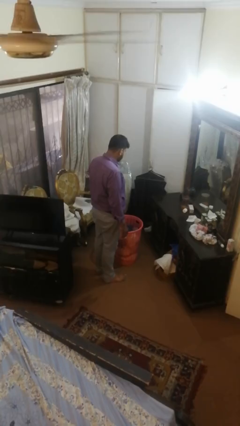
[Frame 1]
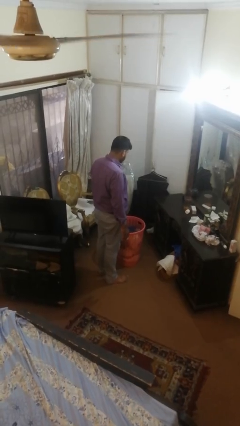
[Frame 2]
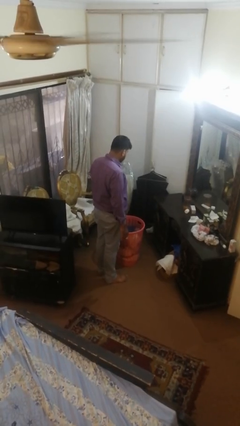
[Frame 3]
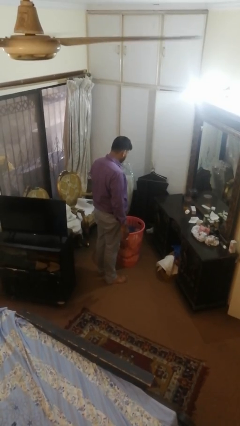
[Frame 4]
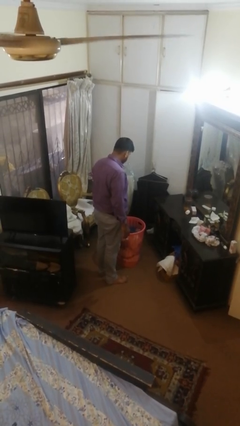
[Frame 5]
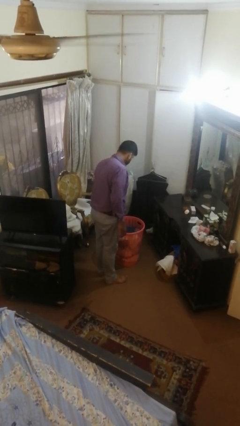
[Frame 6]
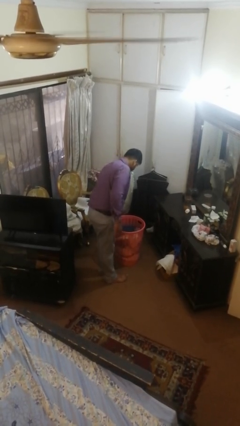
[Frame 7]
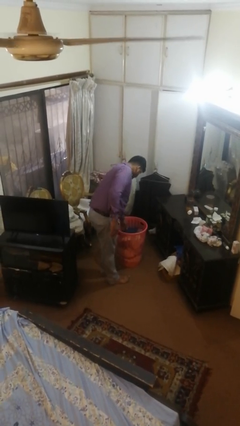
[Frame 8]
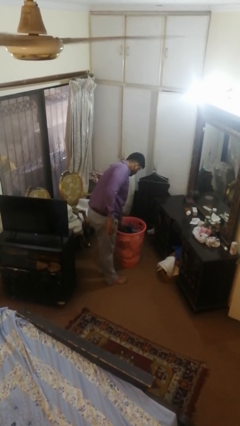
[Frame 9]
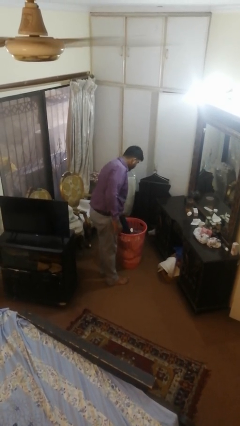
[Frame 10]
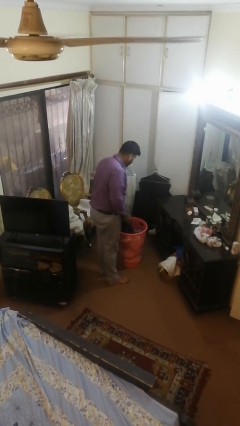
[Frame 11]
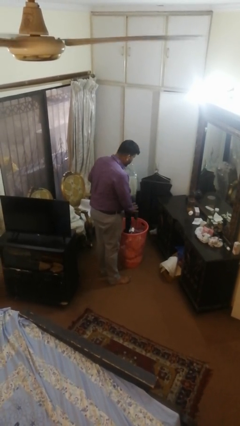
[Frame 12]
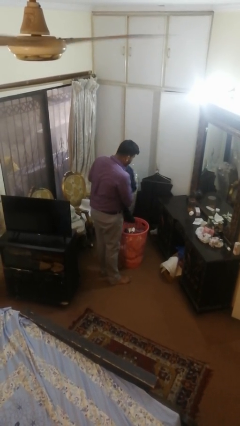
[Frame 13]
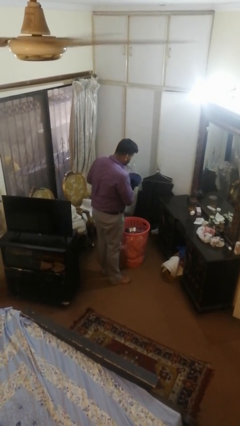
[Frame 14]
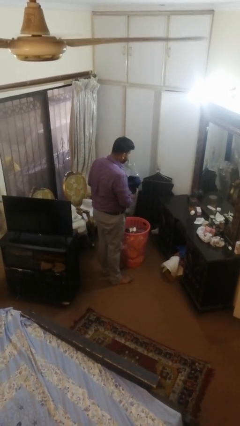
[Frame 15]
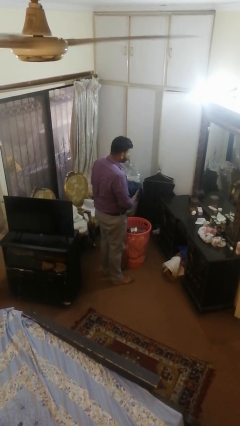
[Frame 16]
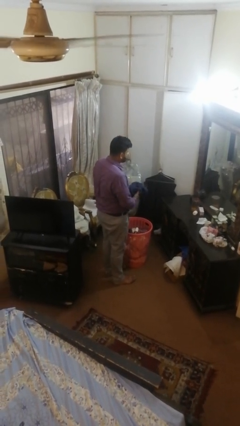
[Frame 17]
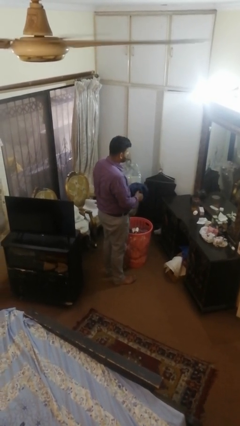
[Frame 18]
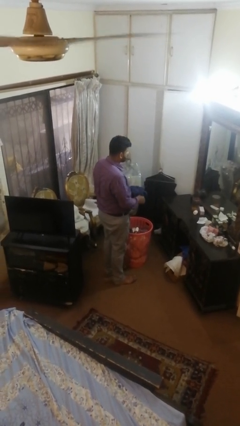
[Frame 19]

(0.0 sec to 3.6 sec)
person takes object from basket

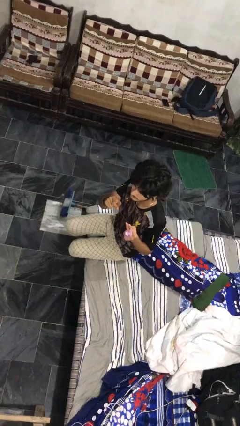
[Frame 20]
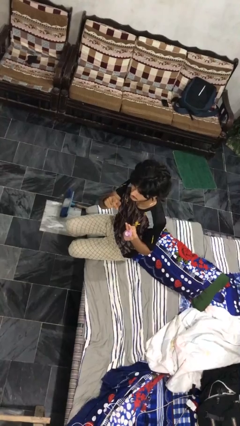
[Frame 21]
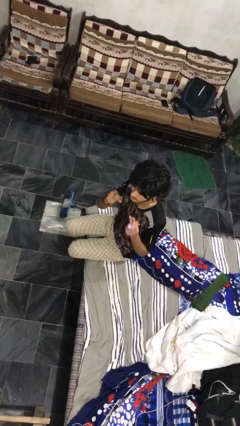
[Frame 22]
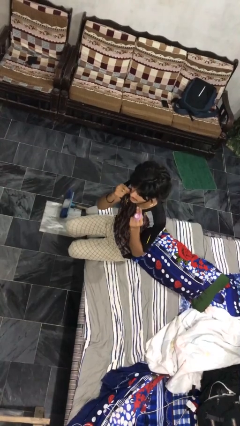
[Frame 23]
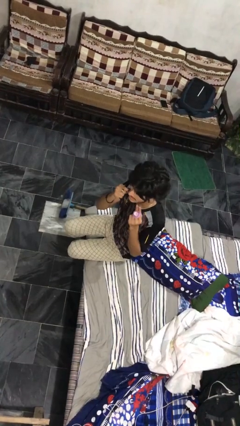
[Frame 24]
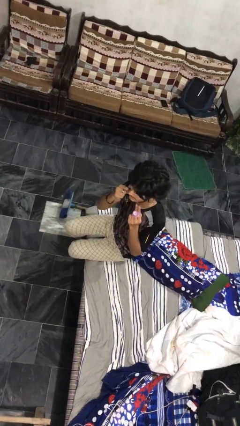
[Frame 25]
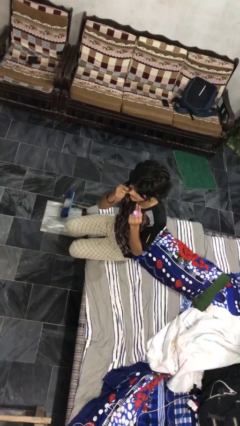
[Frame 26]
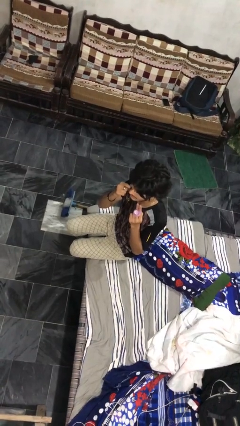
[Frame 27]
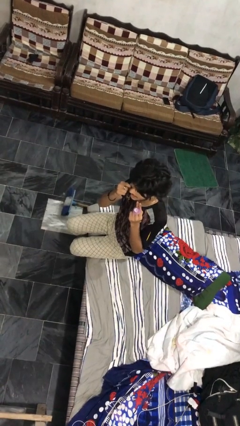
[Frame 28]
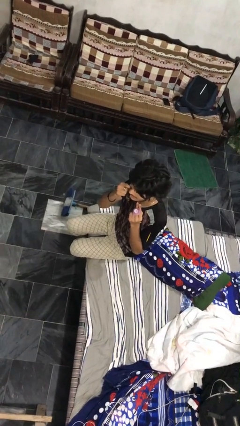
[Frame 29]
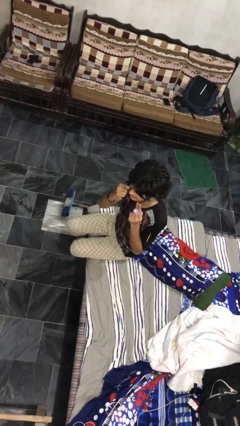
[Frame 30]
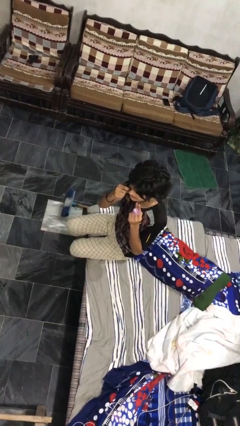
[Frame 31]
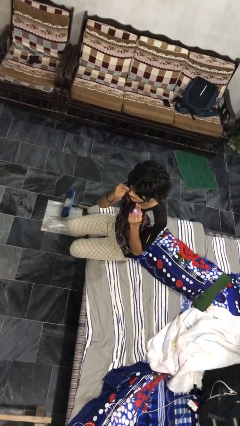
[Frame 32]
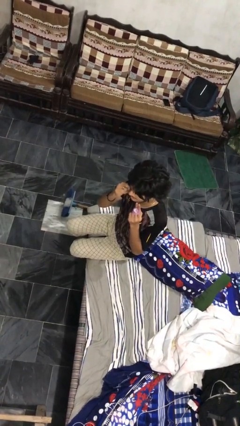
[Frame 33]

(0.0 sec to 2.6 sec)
person flosses

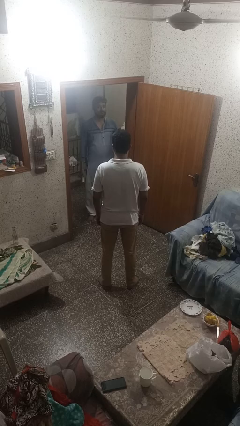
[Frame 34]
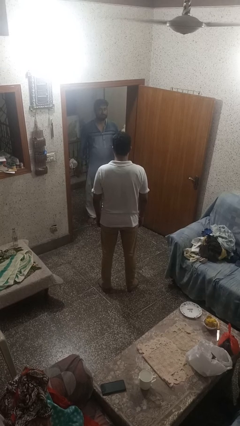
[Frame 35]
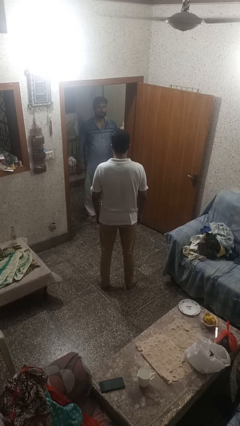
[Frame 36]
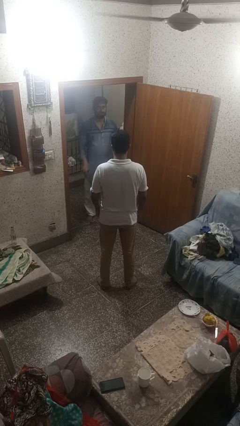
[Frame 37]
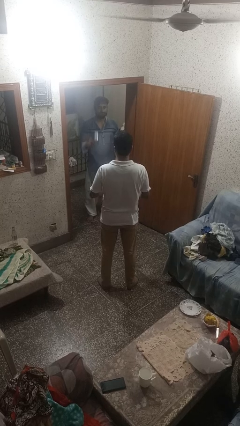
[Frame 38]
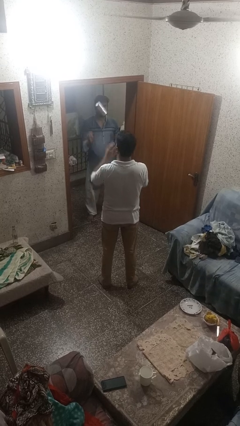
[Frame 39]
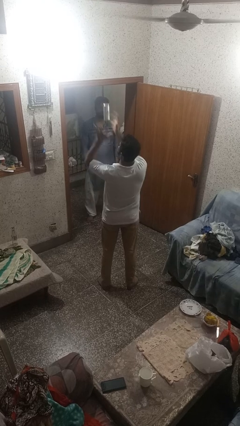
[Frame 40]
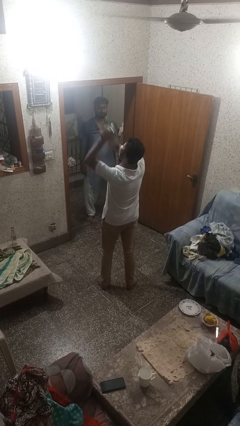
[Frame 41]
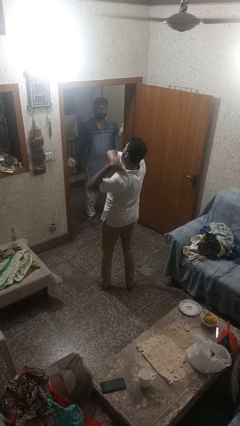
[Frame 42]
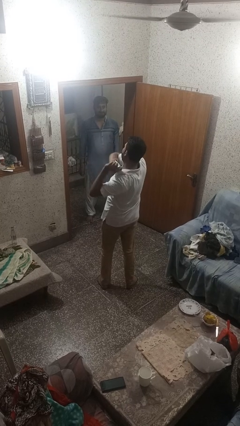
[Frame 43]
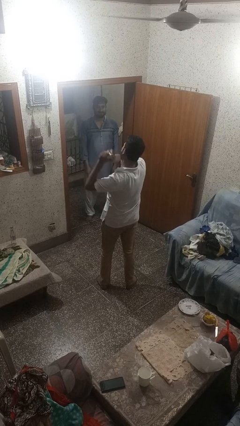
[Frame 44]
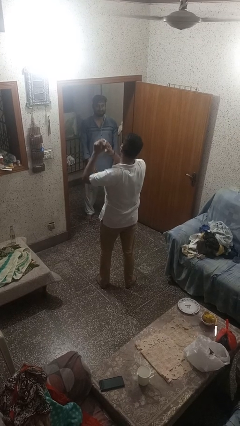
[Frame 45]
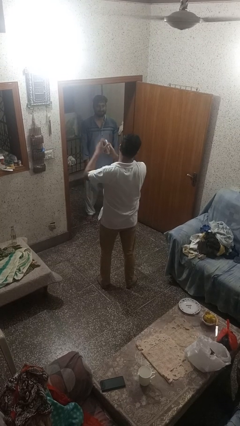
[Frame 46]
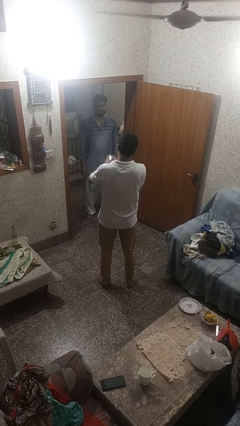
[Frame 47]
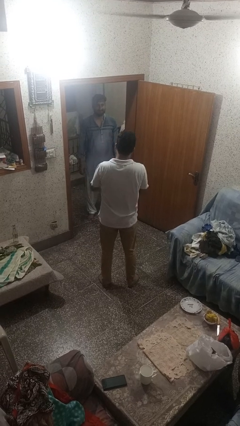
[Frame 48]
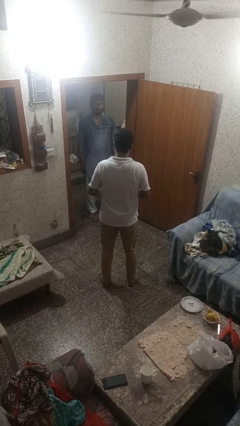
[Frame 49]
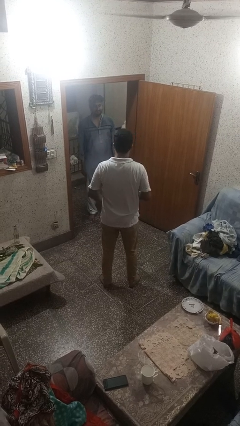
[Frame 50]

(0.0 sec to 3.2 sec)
person catches object from person

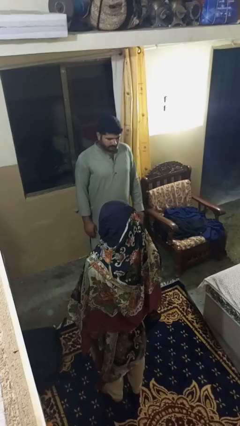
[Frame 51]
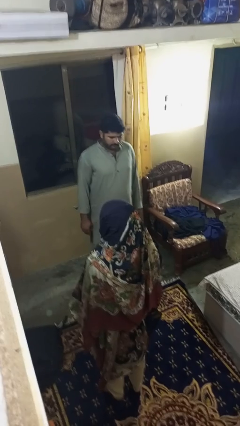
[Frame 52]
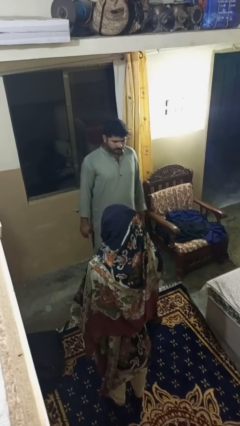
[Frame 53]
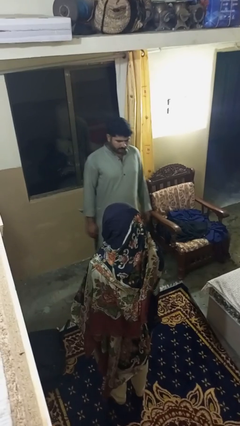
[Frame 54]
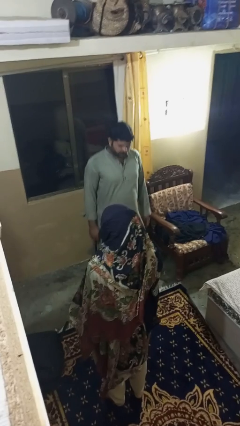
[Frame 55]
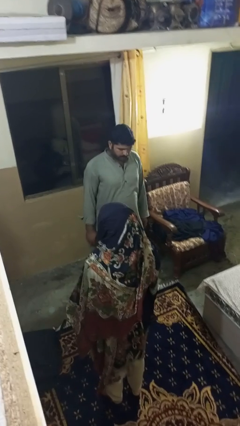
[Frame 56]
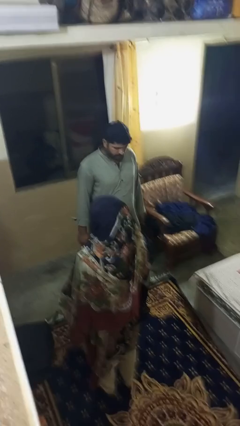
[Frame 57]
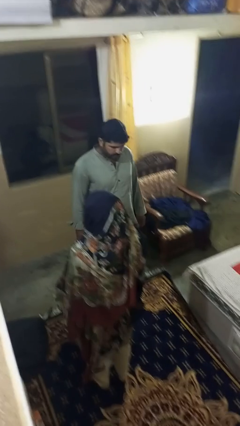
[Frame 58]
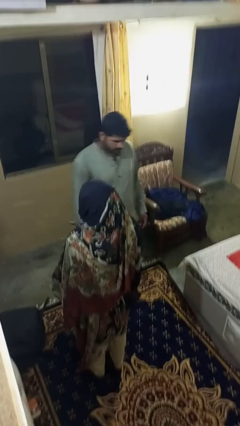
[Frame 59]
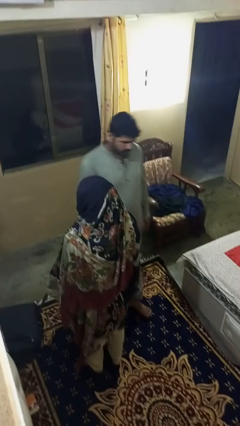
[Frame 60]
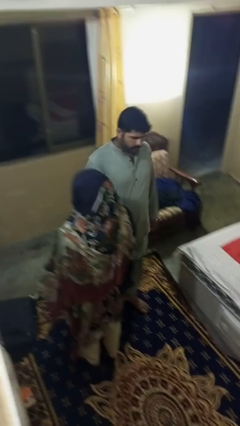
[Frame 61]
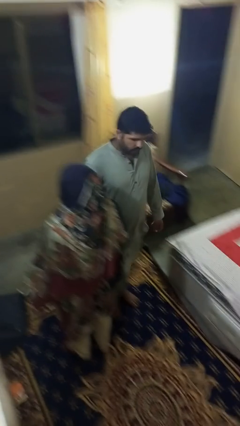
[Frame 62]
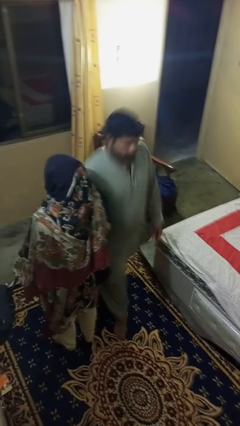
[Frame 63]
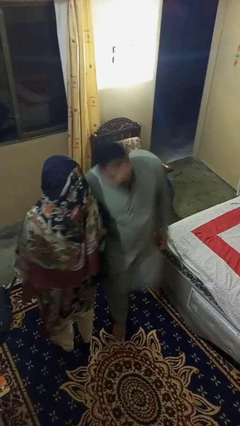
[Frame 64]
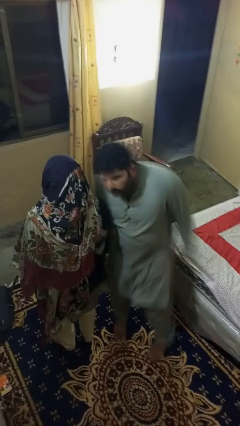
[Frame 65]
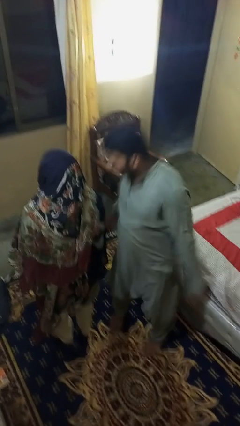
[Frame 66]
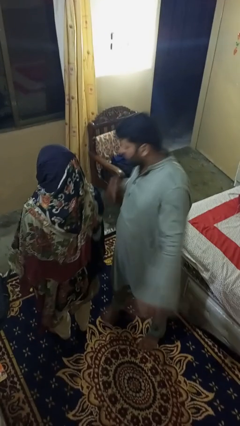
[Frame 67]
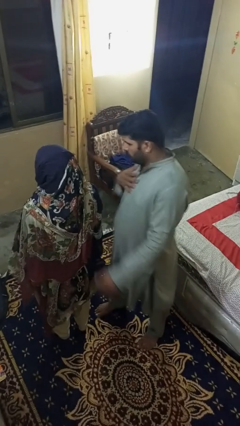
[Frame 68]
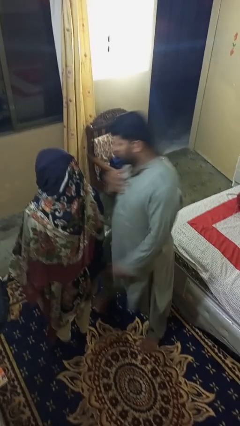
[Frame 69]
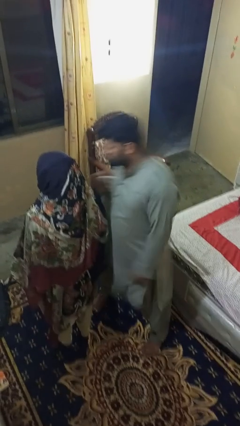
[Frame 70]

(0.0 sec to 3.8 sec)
person bumps into person

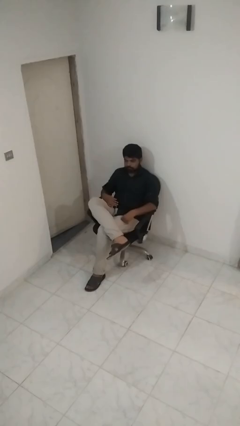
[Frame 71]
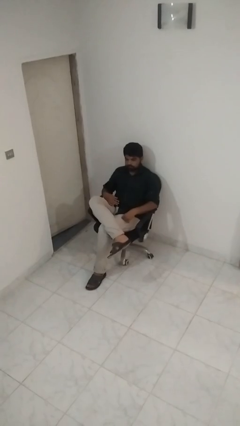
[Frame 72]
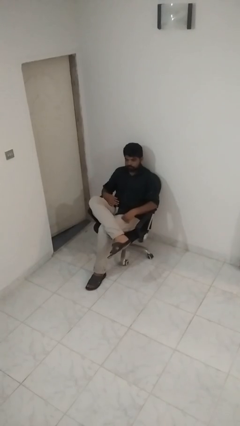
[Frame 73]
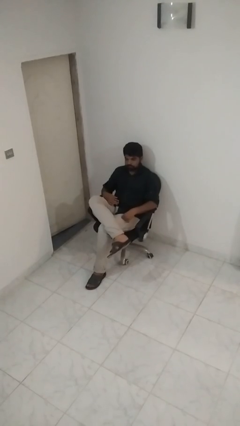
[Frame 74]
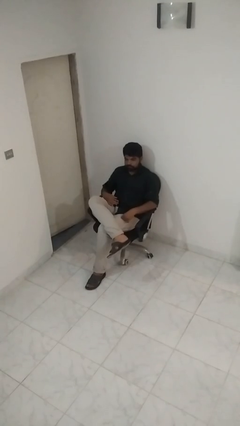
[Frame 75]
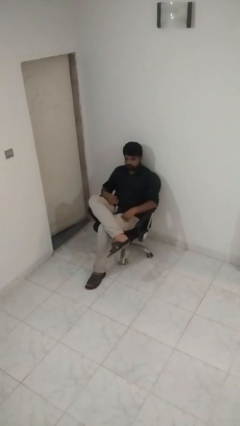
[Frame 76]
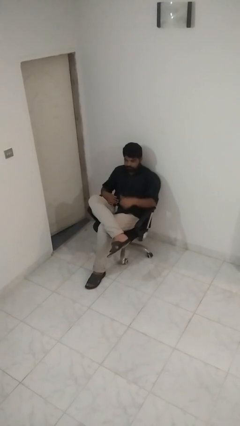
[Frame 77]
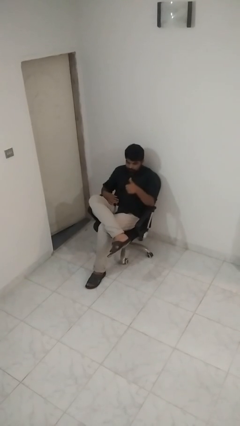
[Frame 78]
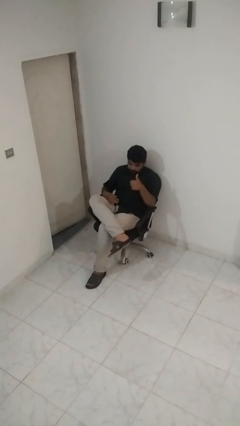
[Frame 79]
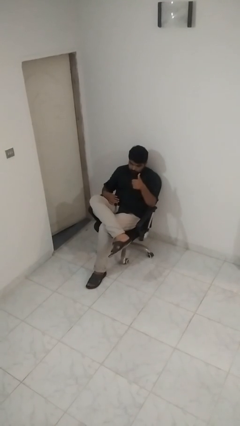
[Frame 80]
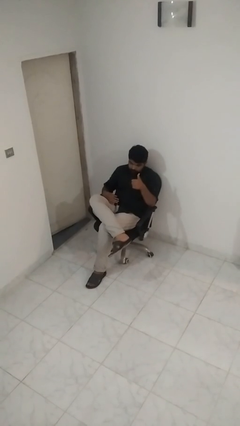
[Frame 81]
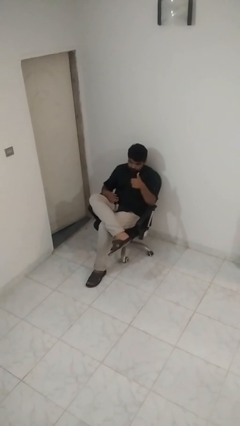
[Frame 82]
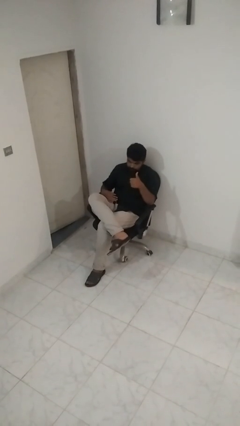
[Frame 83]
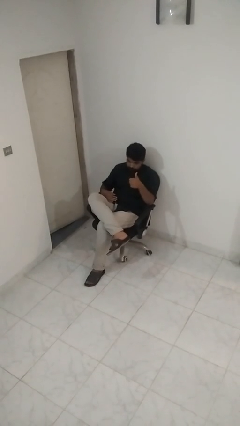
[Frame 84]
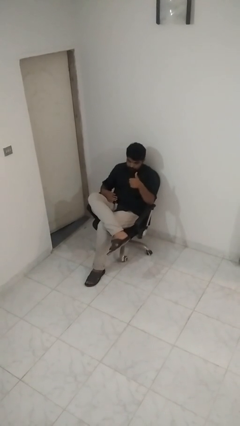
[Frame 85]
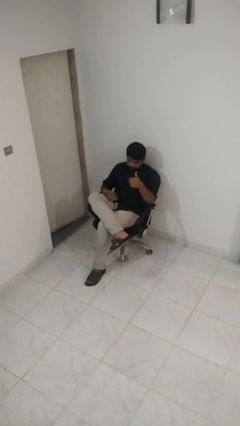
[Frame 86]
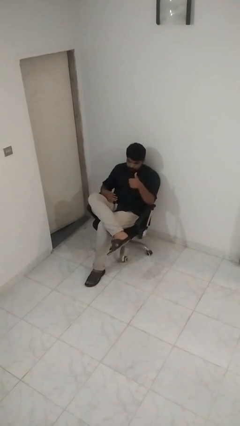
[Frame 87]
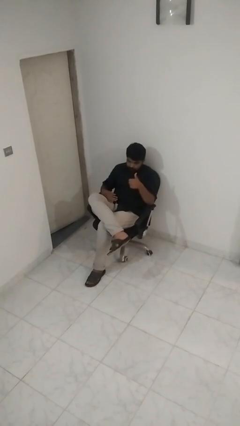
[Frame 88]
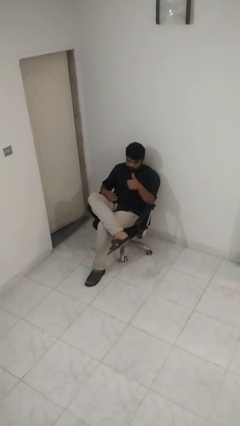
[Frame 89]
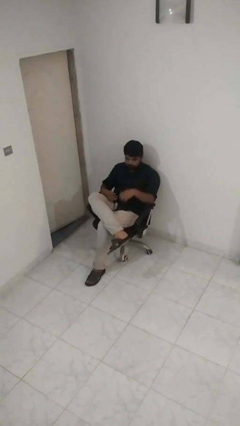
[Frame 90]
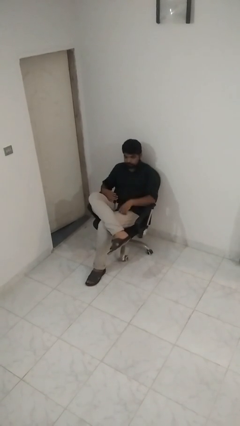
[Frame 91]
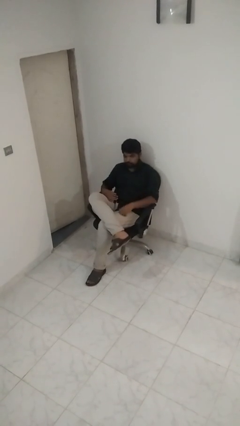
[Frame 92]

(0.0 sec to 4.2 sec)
person gestures thumbs up
